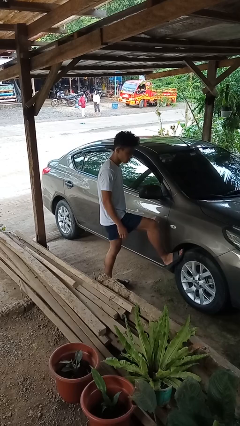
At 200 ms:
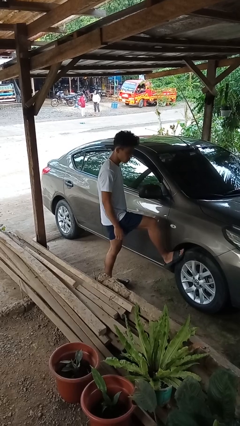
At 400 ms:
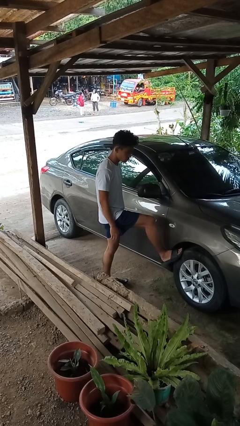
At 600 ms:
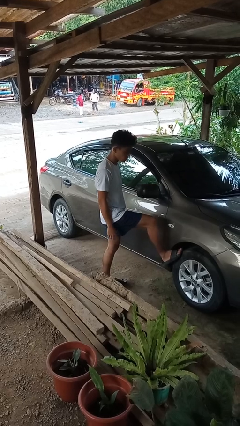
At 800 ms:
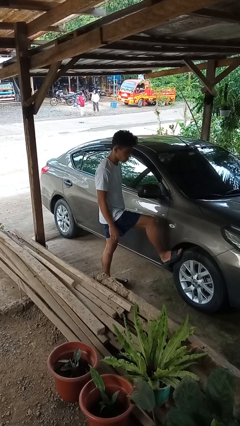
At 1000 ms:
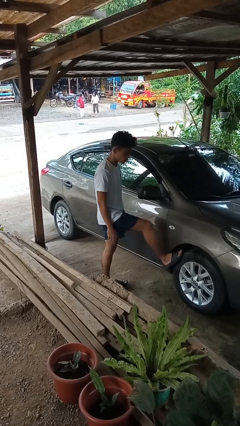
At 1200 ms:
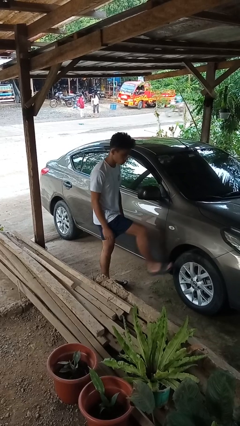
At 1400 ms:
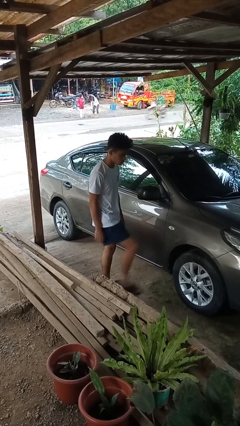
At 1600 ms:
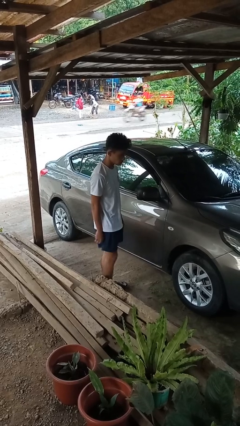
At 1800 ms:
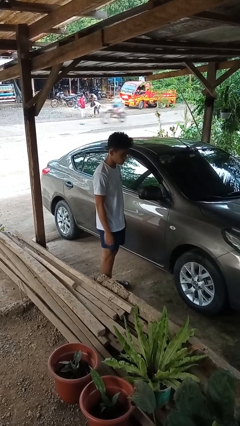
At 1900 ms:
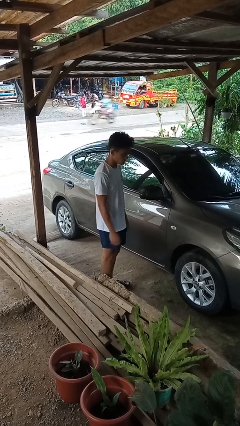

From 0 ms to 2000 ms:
person kicks car tires

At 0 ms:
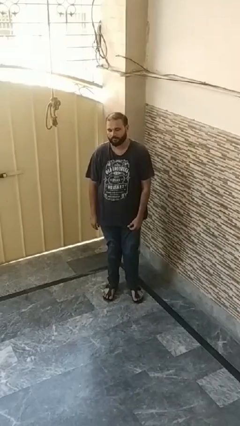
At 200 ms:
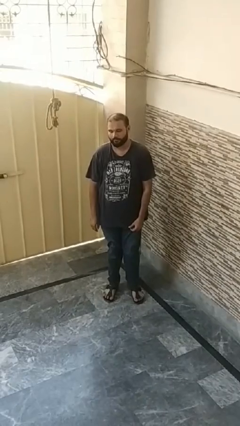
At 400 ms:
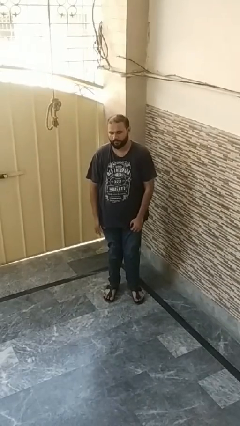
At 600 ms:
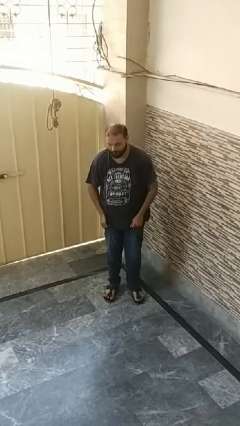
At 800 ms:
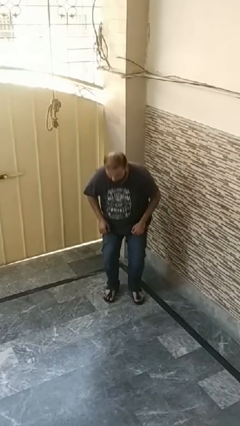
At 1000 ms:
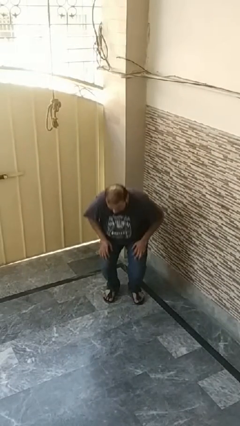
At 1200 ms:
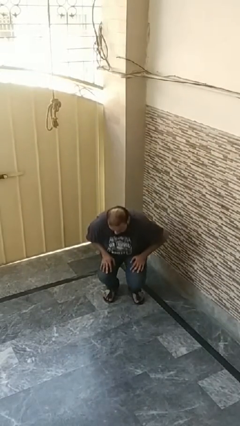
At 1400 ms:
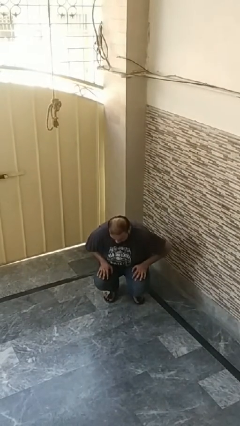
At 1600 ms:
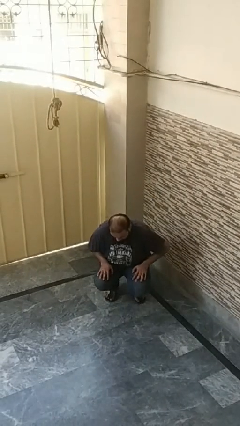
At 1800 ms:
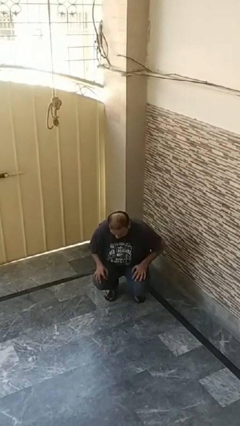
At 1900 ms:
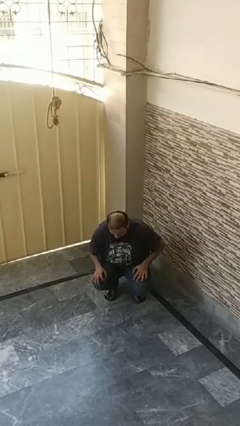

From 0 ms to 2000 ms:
person falls while standing

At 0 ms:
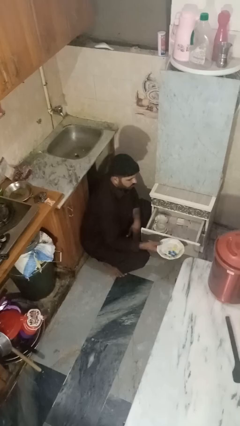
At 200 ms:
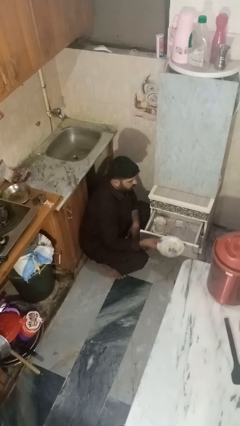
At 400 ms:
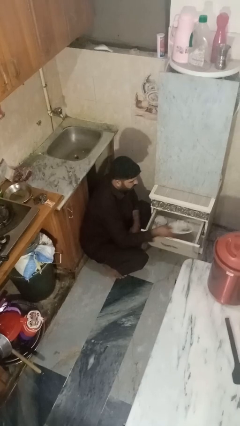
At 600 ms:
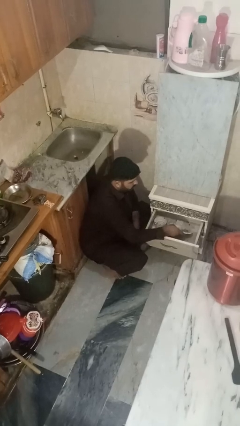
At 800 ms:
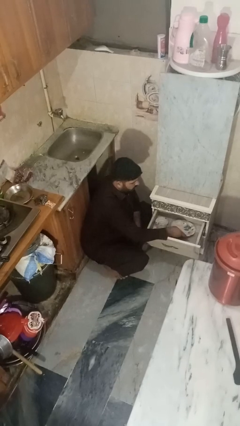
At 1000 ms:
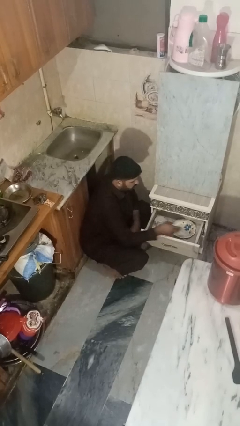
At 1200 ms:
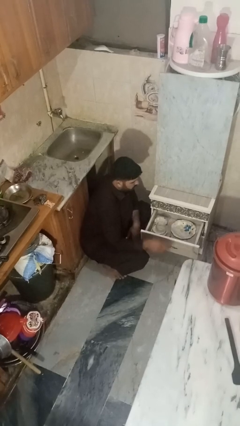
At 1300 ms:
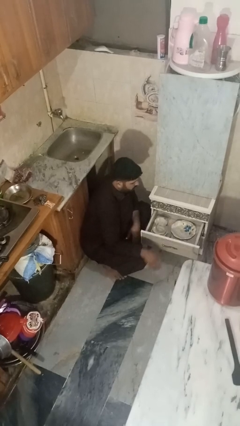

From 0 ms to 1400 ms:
person puts object into kitchen drawer

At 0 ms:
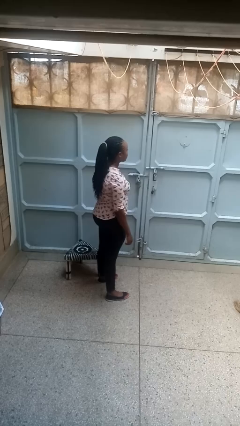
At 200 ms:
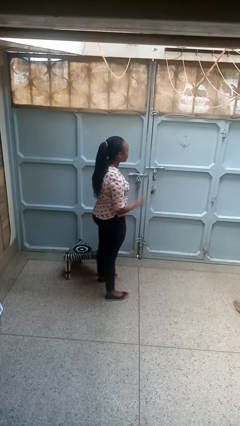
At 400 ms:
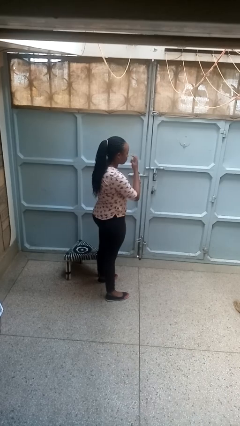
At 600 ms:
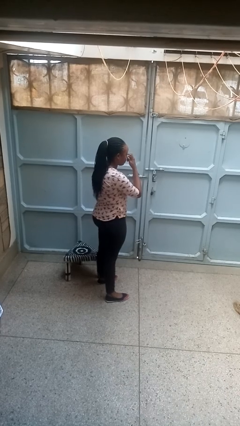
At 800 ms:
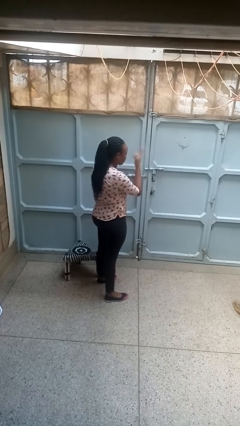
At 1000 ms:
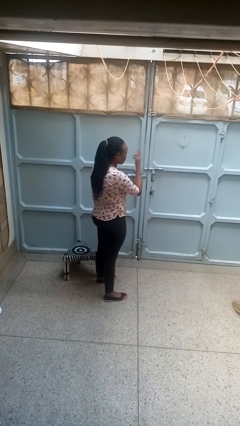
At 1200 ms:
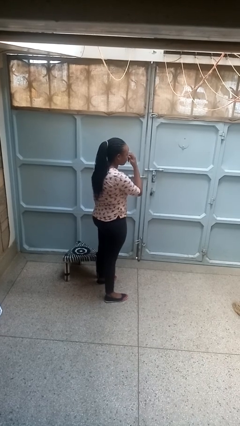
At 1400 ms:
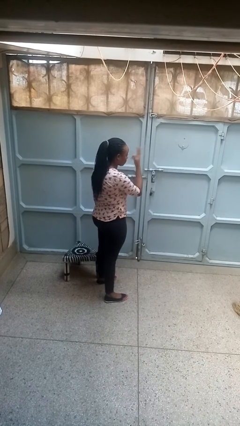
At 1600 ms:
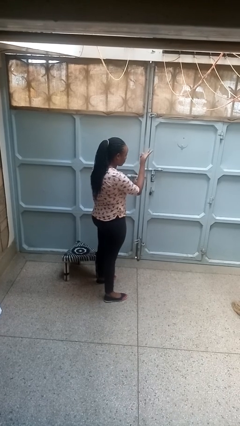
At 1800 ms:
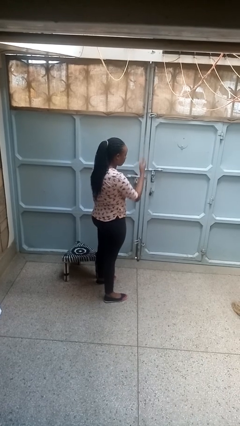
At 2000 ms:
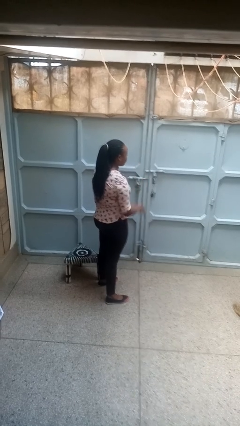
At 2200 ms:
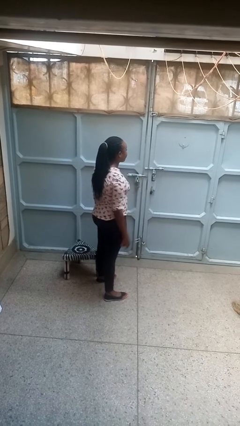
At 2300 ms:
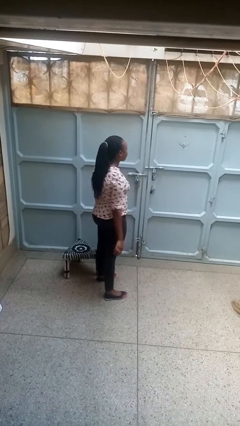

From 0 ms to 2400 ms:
person gestures watch closely

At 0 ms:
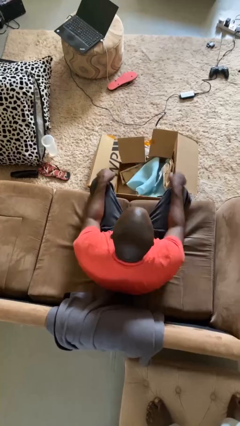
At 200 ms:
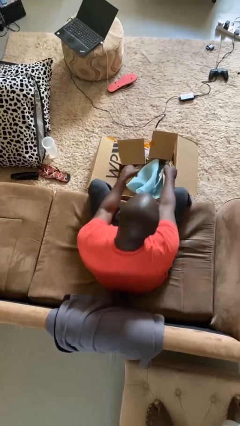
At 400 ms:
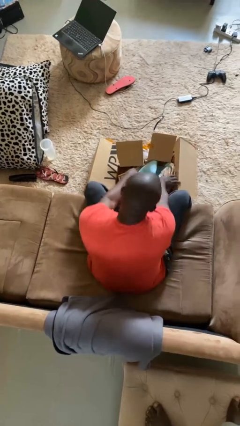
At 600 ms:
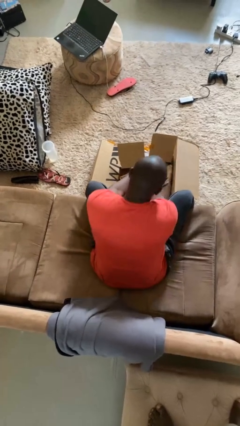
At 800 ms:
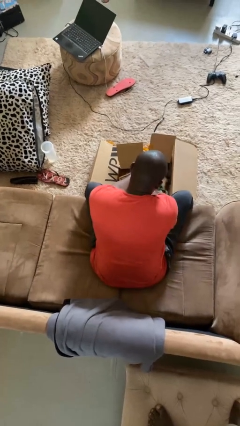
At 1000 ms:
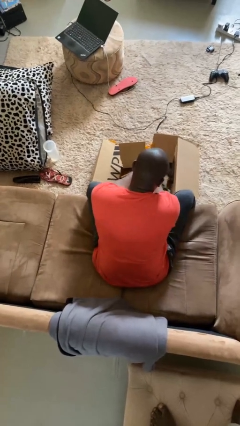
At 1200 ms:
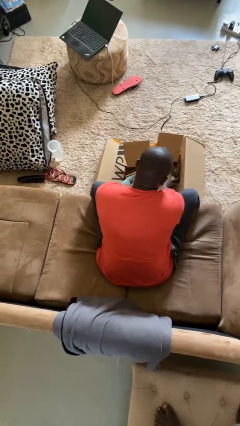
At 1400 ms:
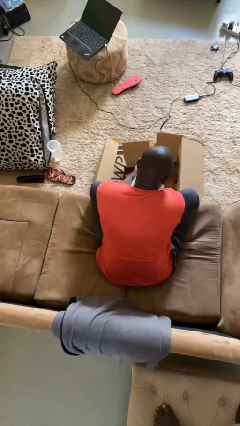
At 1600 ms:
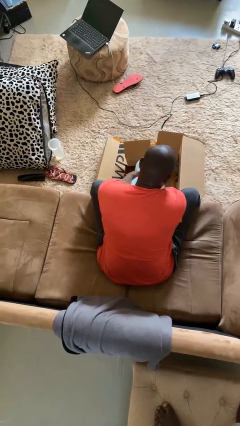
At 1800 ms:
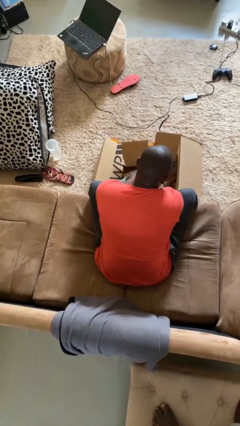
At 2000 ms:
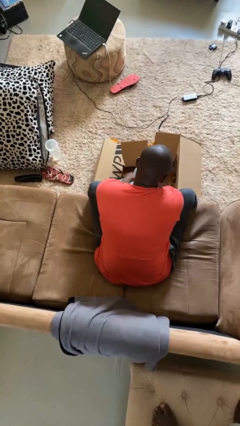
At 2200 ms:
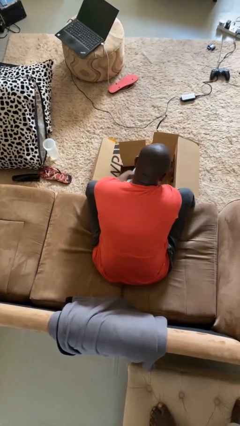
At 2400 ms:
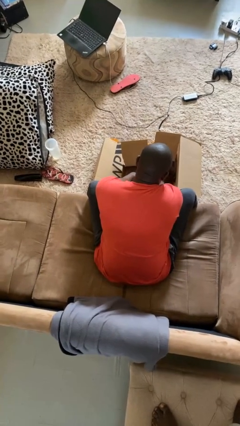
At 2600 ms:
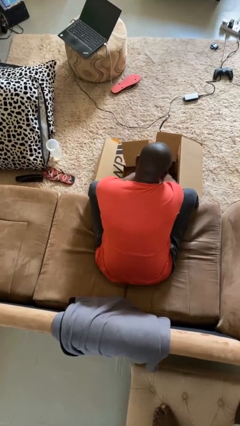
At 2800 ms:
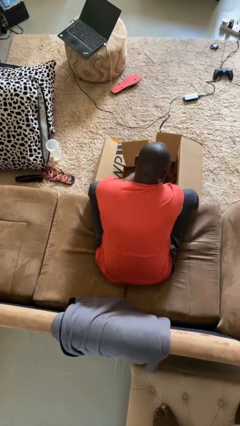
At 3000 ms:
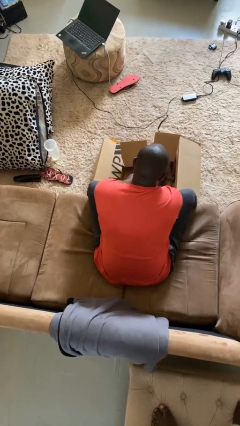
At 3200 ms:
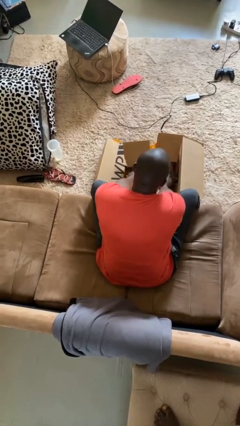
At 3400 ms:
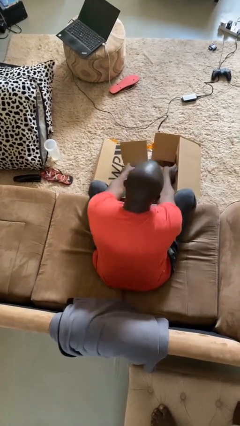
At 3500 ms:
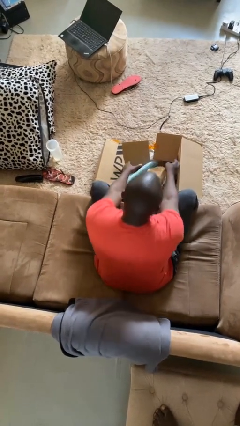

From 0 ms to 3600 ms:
person searches in box

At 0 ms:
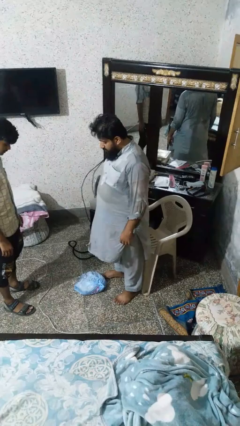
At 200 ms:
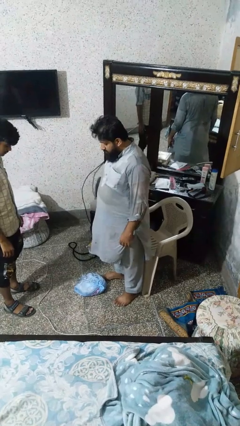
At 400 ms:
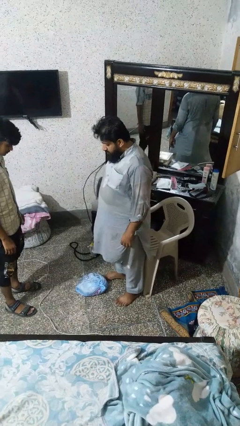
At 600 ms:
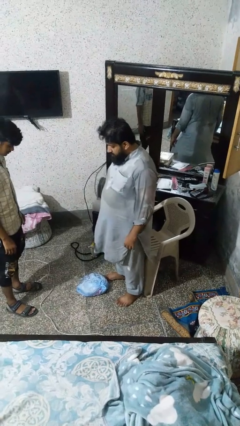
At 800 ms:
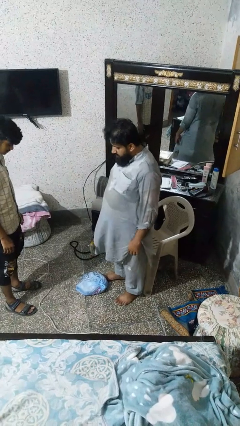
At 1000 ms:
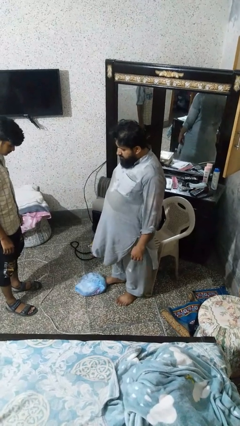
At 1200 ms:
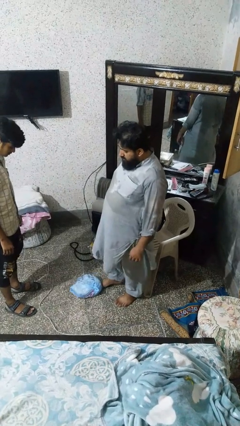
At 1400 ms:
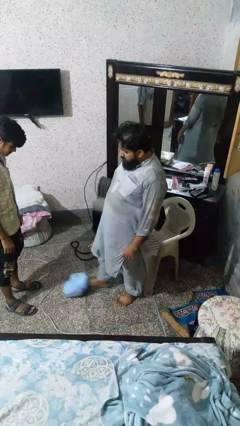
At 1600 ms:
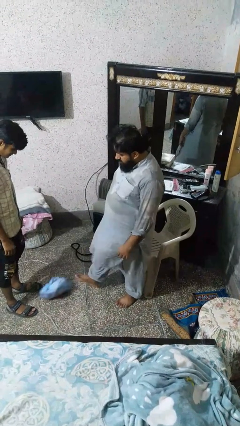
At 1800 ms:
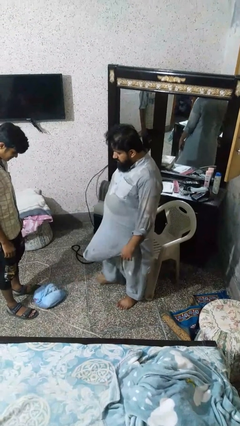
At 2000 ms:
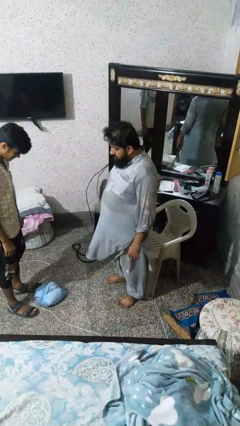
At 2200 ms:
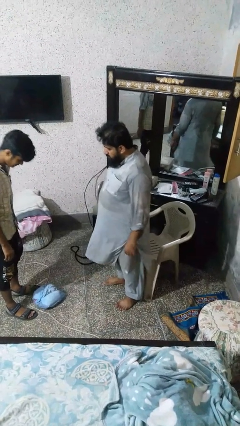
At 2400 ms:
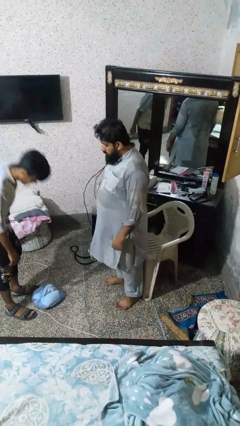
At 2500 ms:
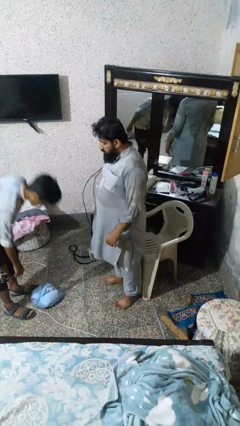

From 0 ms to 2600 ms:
person kicks object to person

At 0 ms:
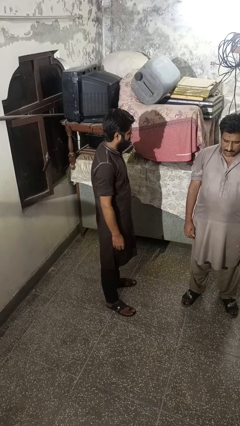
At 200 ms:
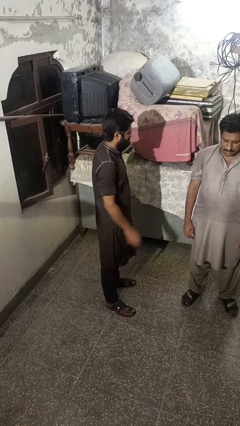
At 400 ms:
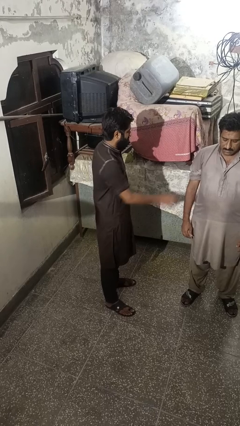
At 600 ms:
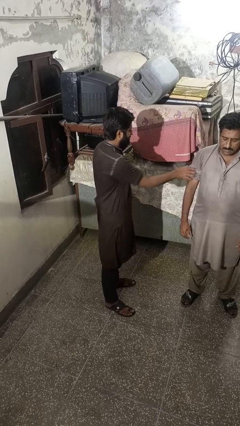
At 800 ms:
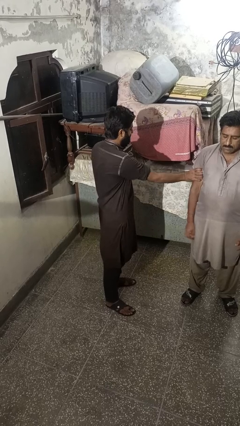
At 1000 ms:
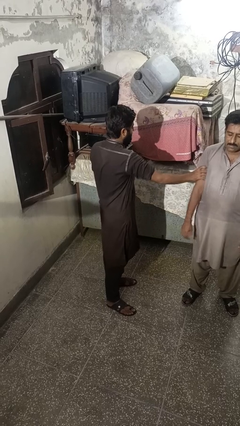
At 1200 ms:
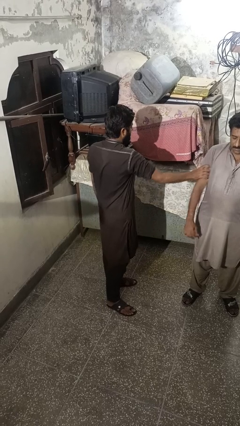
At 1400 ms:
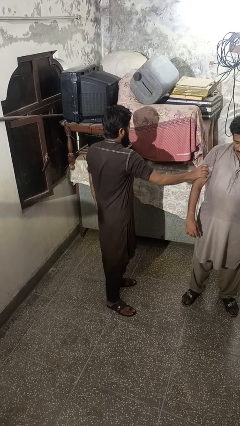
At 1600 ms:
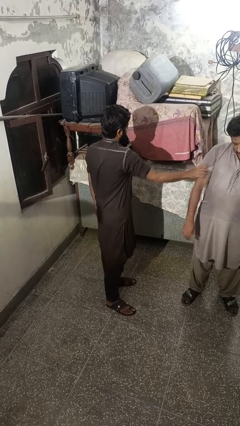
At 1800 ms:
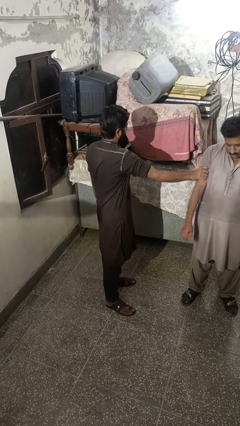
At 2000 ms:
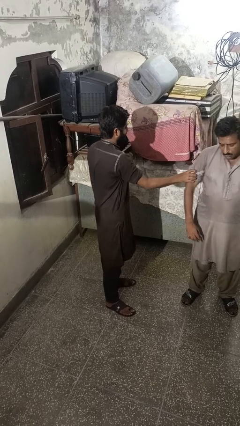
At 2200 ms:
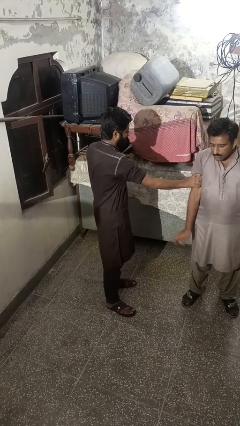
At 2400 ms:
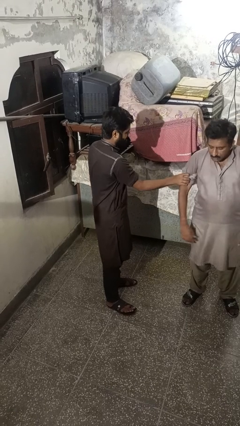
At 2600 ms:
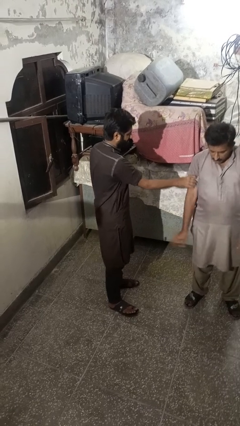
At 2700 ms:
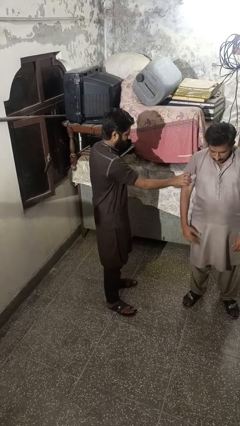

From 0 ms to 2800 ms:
person grabs person by bicep
